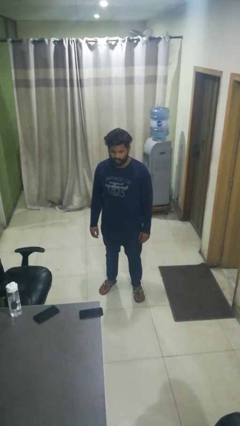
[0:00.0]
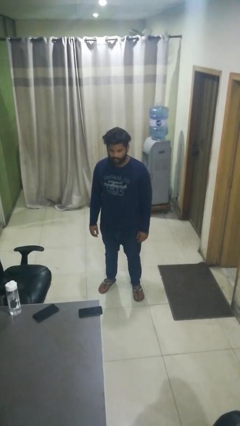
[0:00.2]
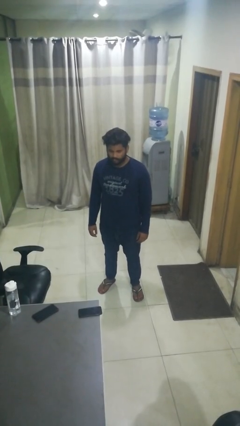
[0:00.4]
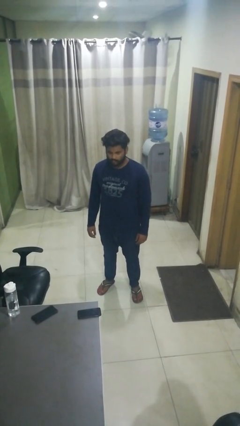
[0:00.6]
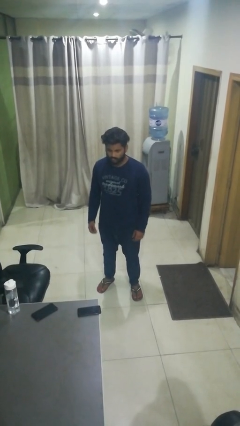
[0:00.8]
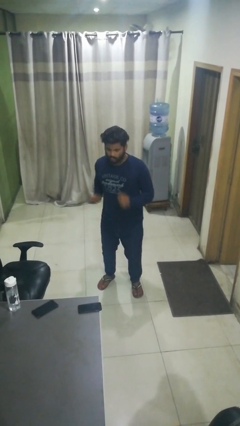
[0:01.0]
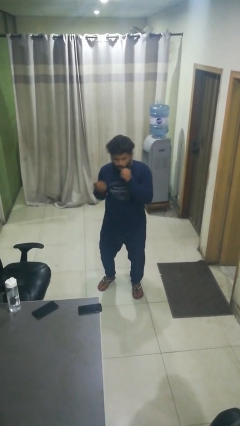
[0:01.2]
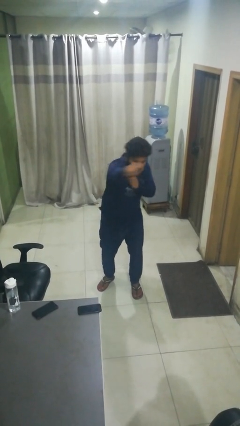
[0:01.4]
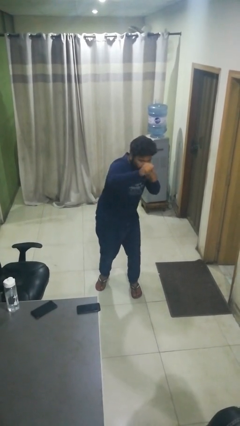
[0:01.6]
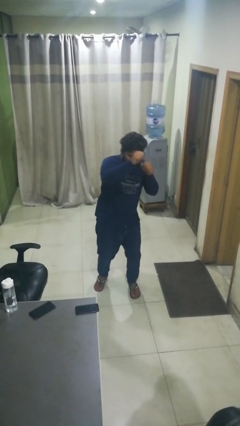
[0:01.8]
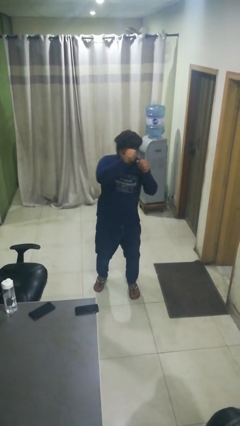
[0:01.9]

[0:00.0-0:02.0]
person punches

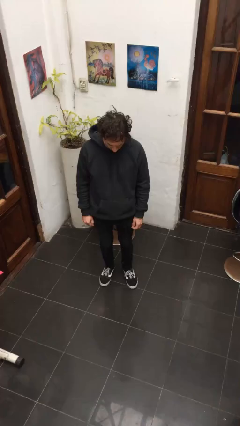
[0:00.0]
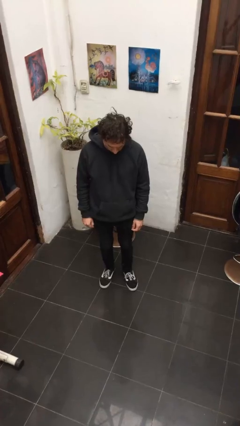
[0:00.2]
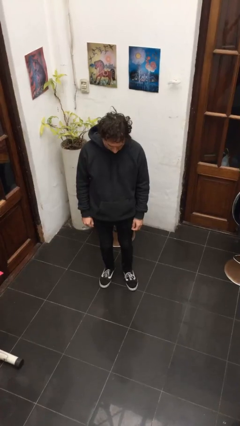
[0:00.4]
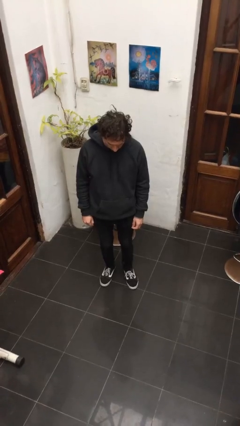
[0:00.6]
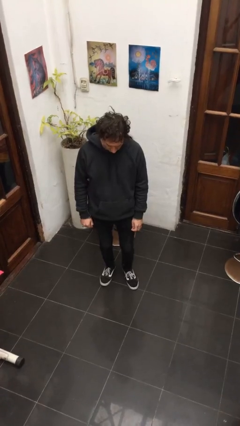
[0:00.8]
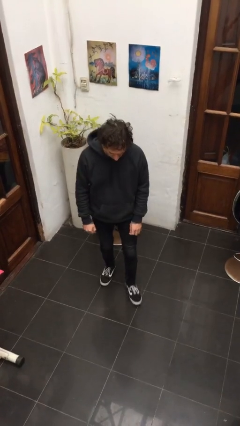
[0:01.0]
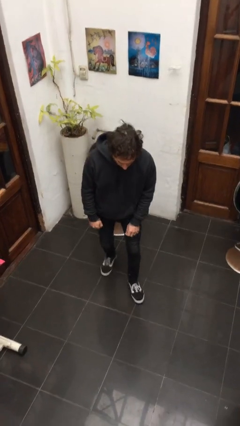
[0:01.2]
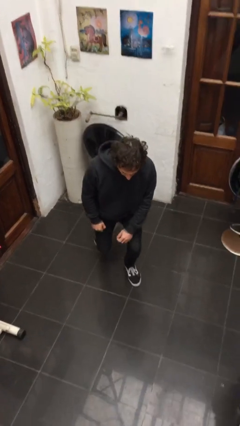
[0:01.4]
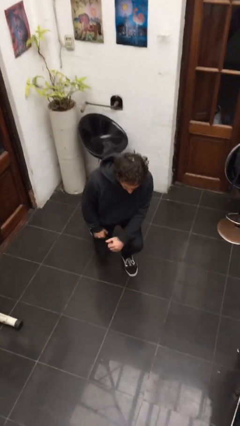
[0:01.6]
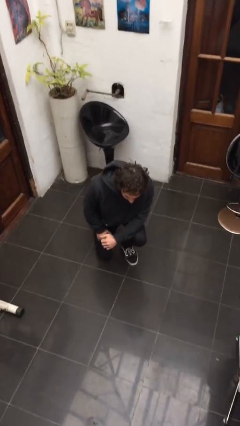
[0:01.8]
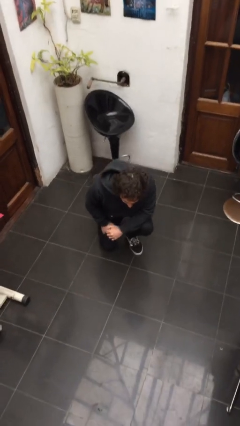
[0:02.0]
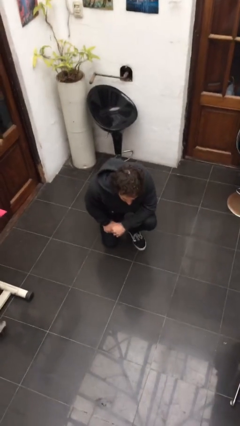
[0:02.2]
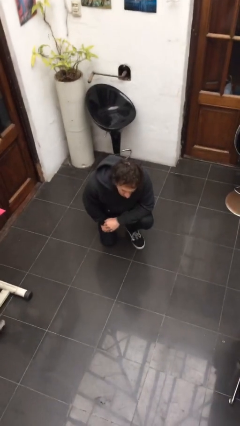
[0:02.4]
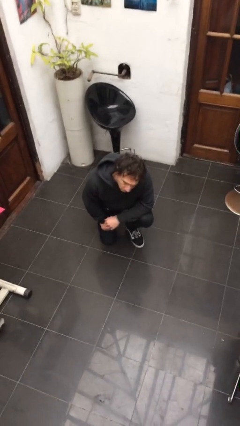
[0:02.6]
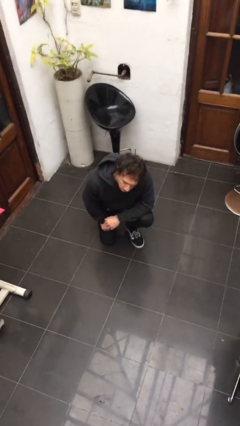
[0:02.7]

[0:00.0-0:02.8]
person kneels

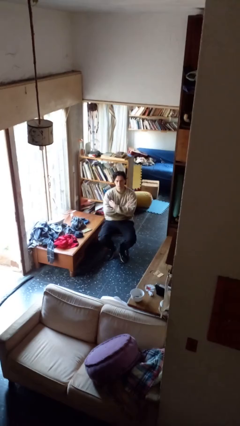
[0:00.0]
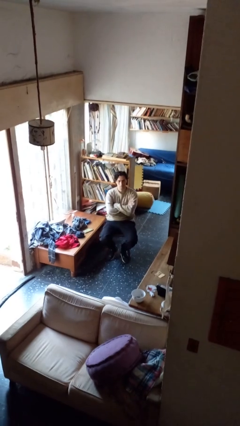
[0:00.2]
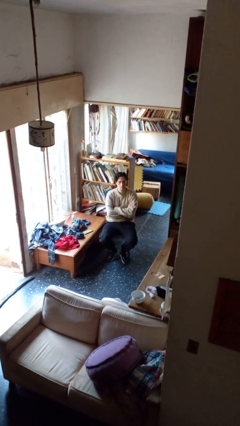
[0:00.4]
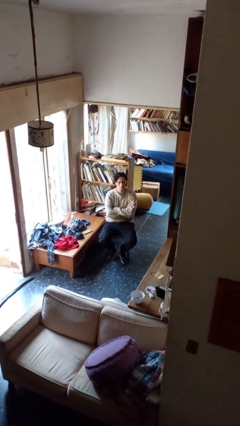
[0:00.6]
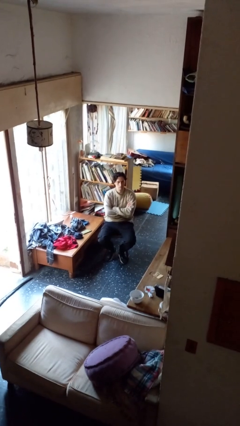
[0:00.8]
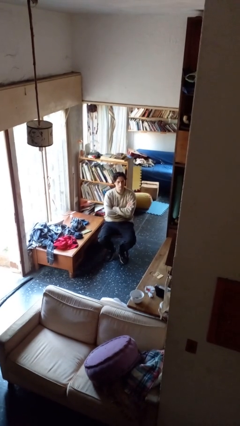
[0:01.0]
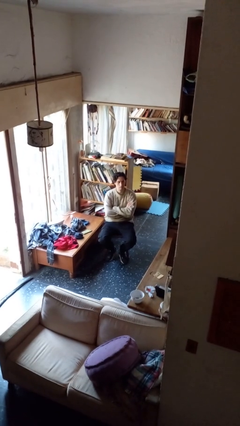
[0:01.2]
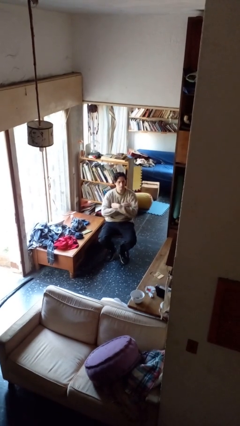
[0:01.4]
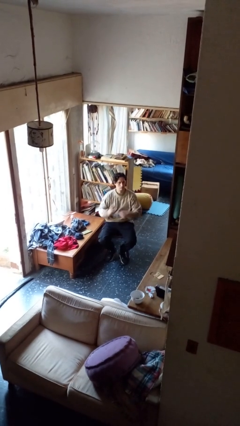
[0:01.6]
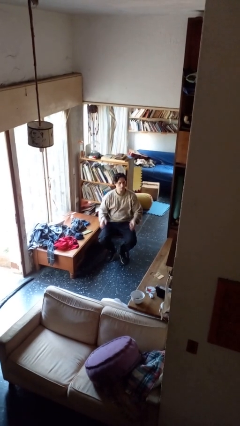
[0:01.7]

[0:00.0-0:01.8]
person crosses arms

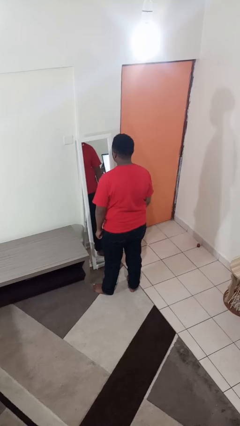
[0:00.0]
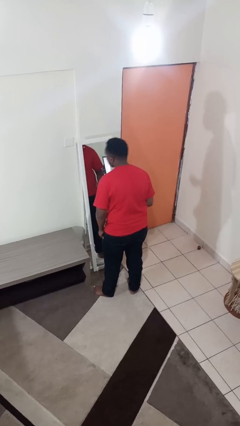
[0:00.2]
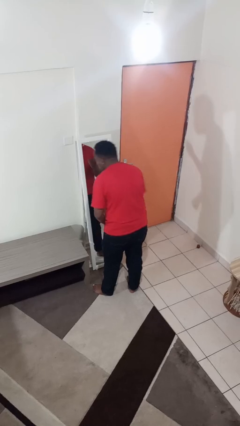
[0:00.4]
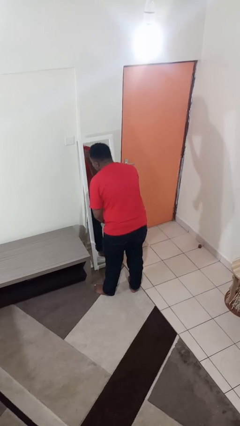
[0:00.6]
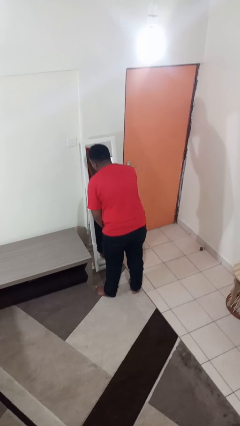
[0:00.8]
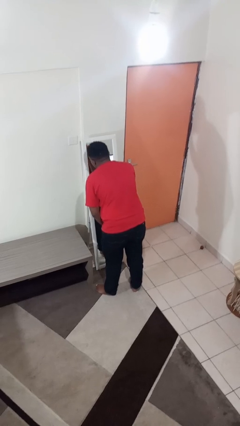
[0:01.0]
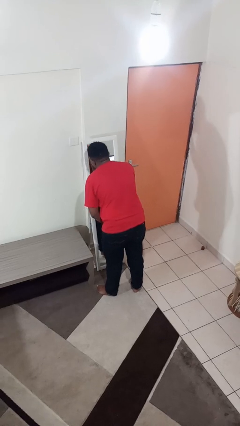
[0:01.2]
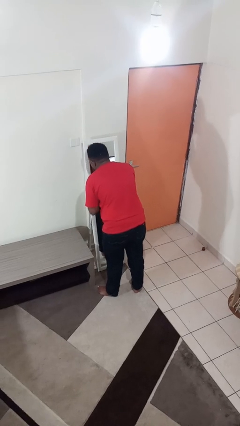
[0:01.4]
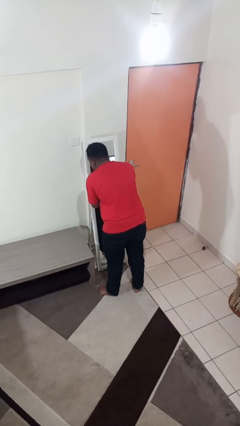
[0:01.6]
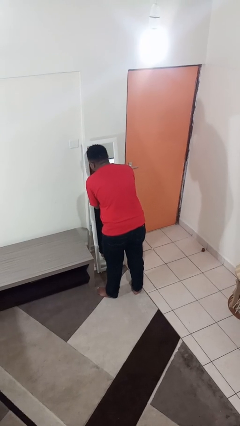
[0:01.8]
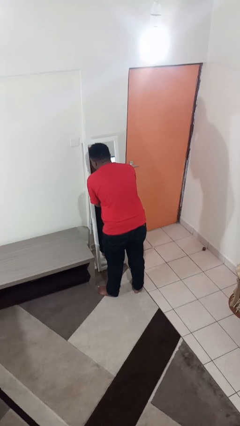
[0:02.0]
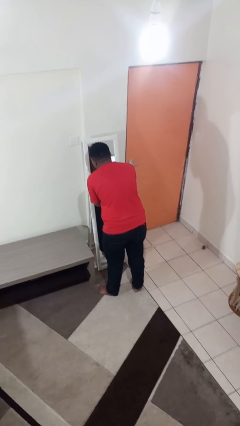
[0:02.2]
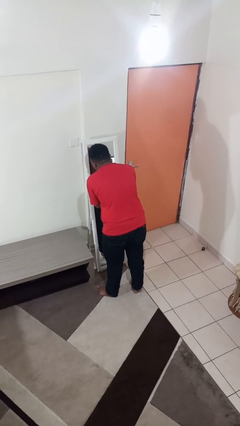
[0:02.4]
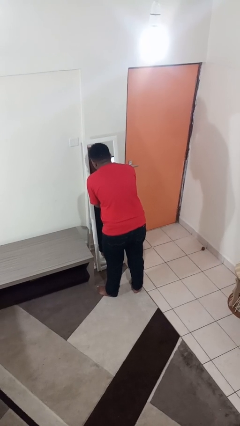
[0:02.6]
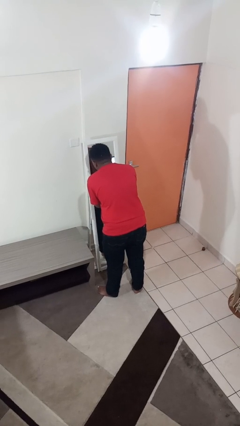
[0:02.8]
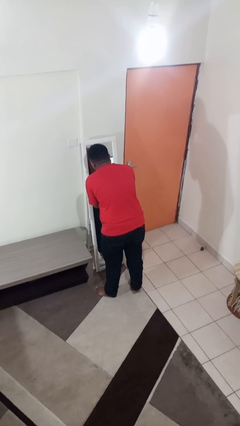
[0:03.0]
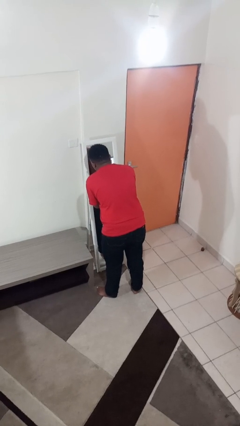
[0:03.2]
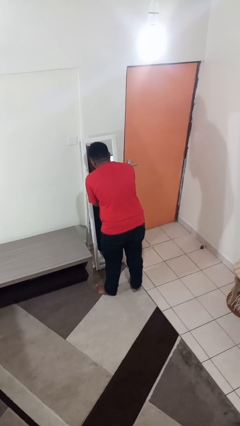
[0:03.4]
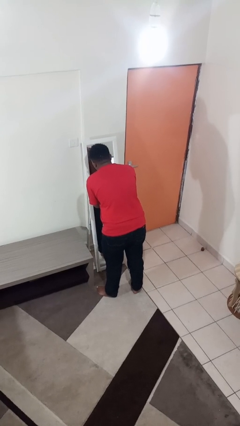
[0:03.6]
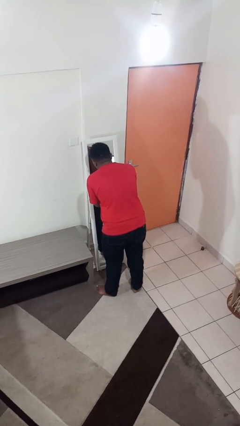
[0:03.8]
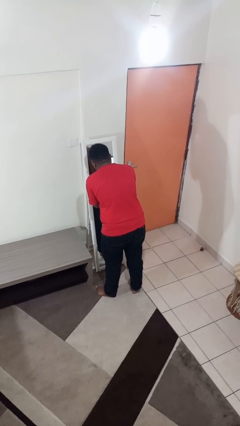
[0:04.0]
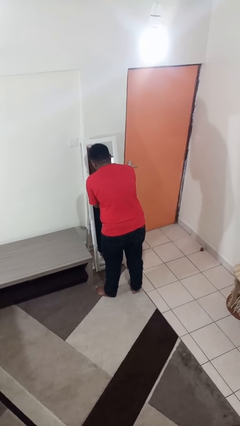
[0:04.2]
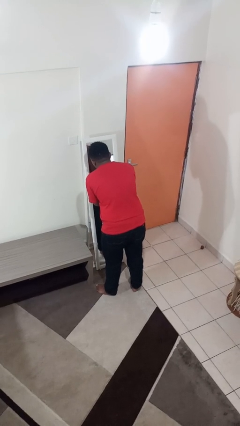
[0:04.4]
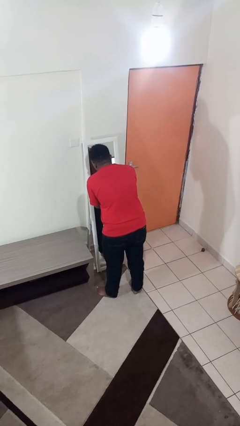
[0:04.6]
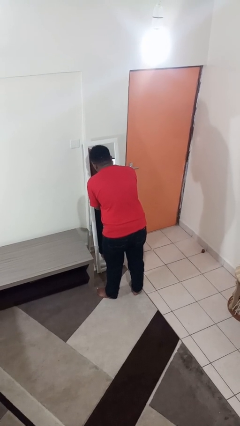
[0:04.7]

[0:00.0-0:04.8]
person applies eye makeup

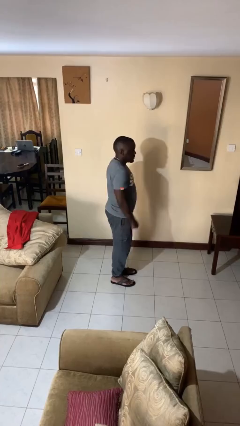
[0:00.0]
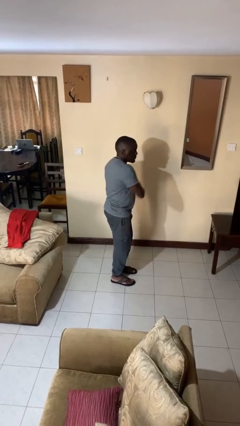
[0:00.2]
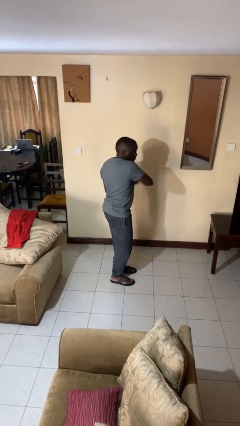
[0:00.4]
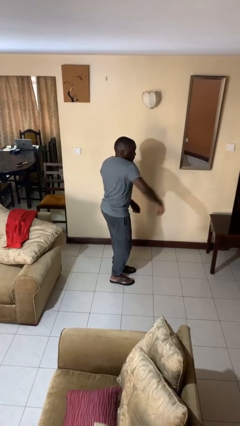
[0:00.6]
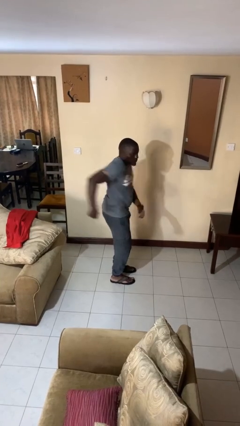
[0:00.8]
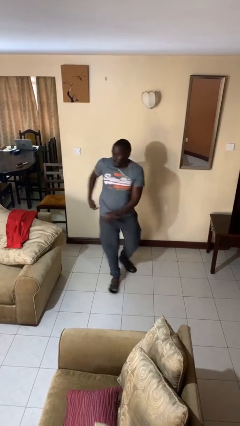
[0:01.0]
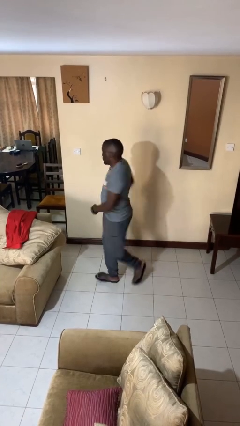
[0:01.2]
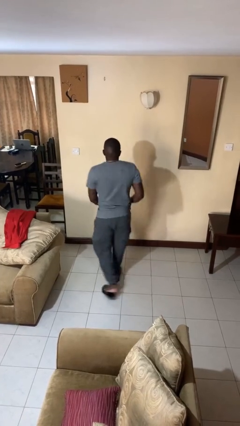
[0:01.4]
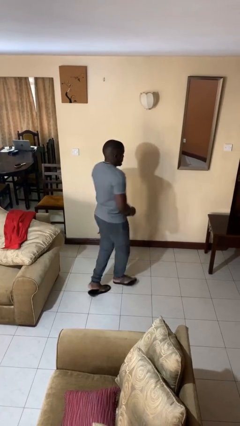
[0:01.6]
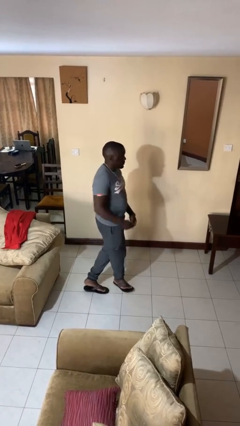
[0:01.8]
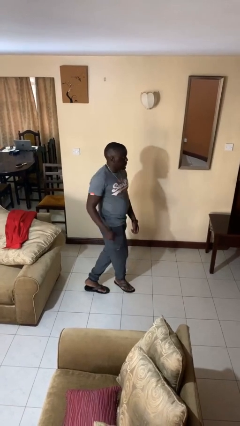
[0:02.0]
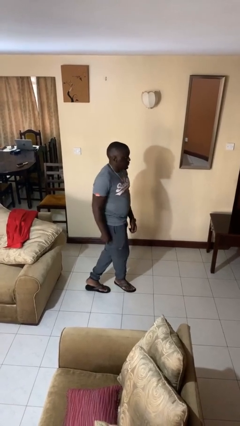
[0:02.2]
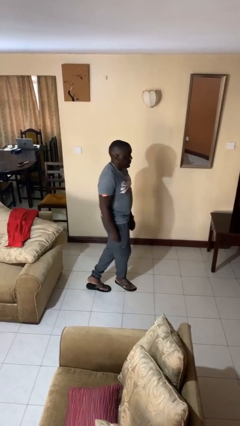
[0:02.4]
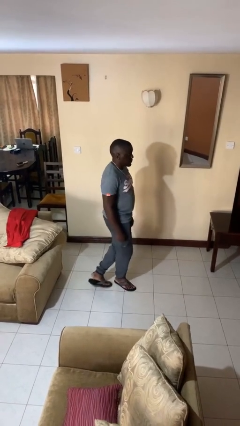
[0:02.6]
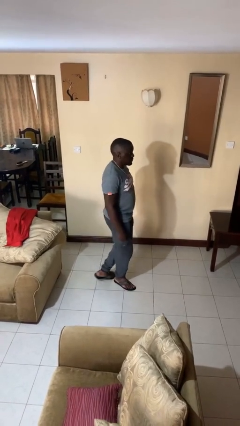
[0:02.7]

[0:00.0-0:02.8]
person twirls

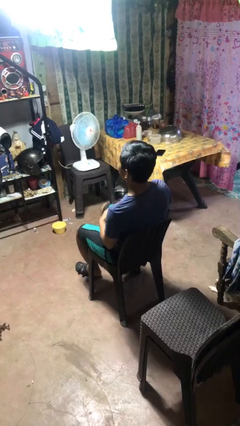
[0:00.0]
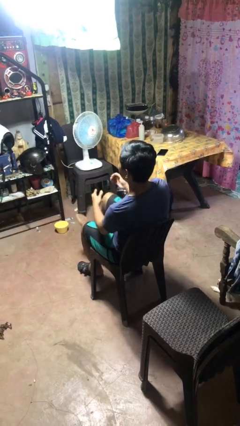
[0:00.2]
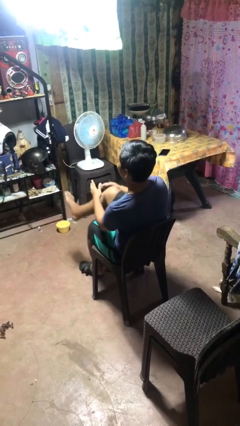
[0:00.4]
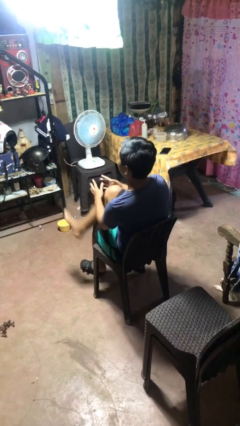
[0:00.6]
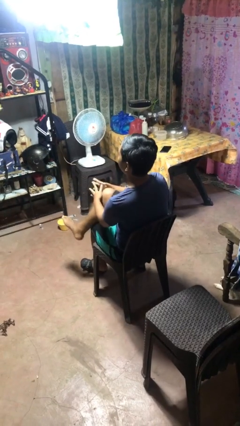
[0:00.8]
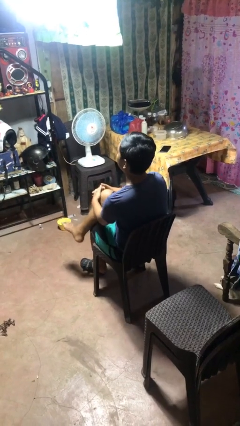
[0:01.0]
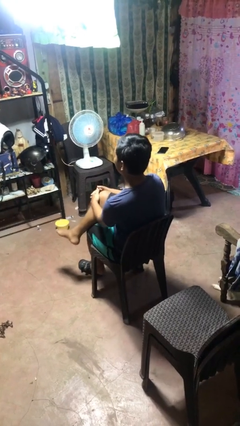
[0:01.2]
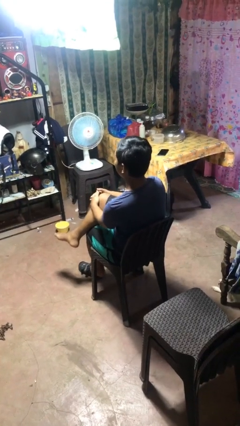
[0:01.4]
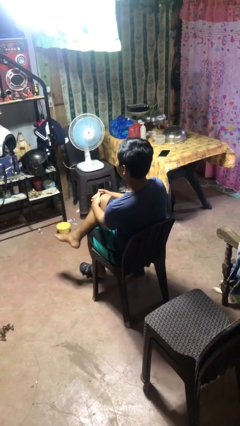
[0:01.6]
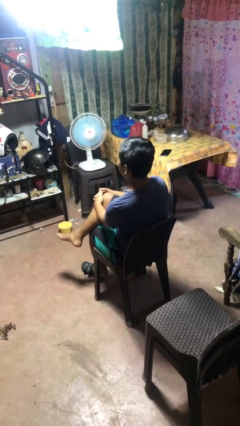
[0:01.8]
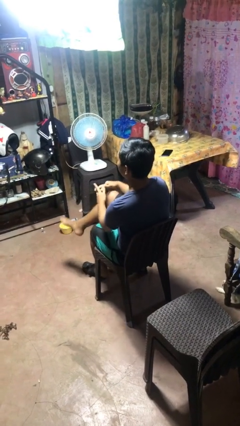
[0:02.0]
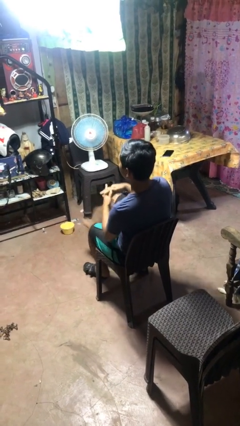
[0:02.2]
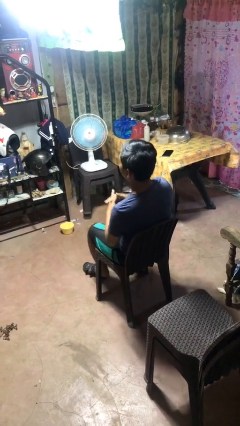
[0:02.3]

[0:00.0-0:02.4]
person crosses legs

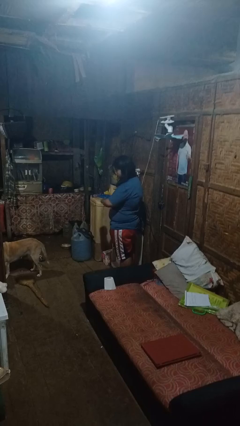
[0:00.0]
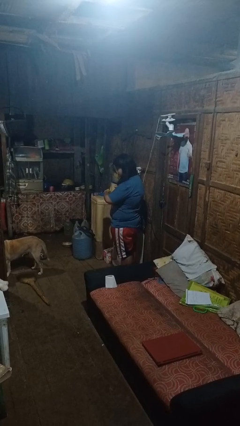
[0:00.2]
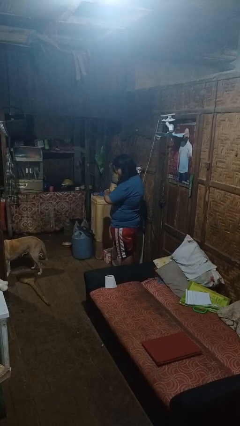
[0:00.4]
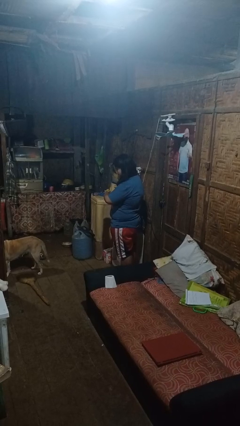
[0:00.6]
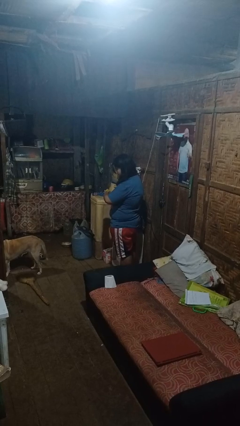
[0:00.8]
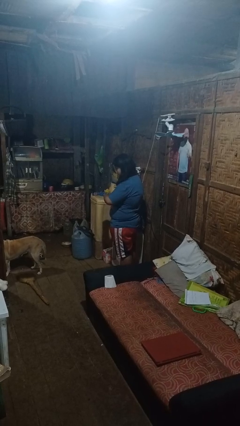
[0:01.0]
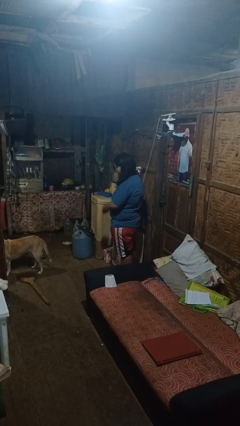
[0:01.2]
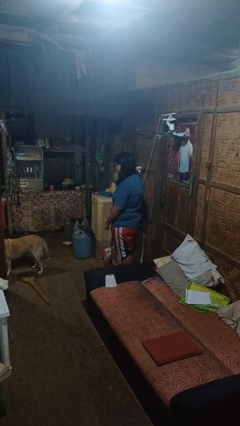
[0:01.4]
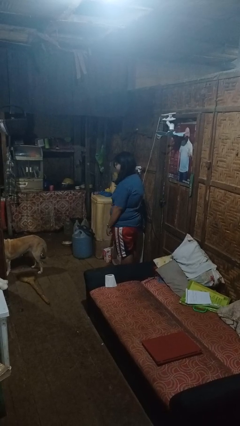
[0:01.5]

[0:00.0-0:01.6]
person looks at wristwatch
